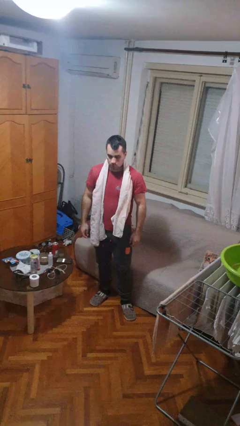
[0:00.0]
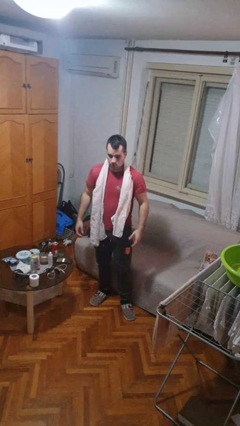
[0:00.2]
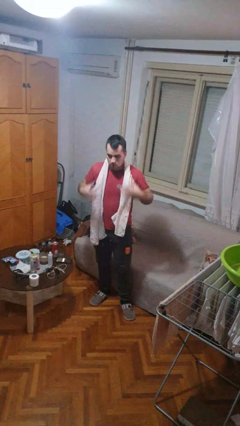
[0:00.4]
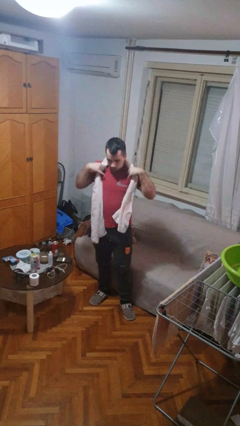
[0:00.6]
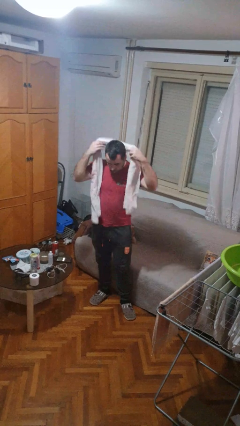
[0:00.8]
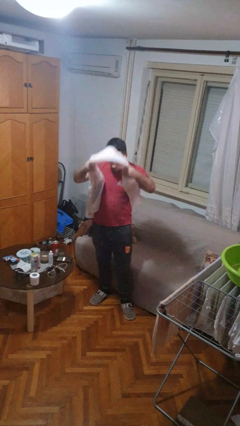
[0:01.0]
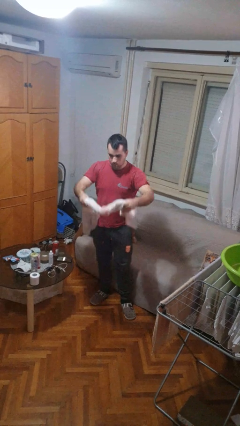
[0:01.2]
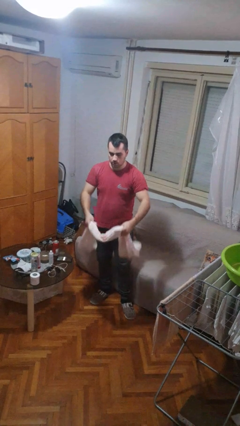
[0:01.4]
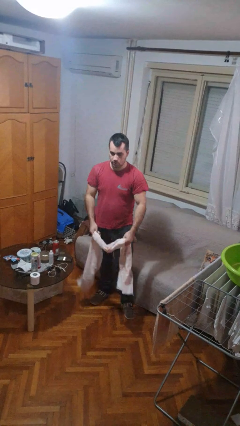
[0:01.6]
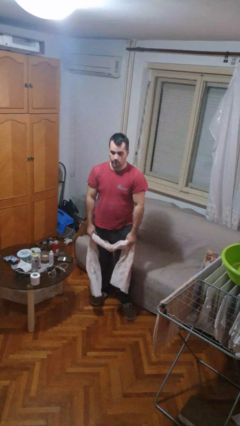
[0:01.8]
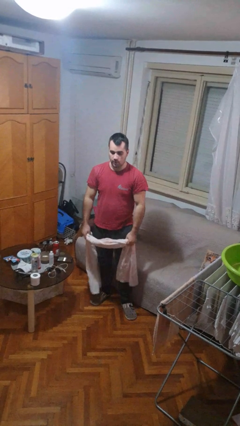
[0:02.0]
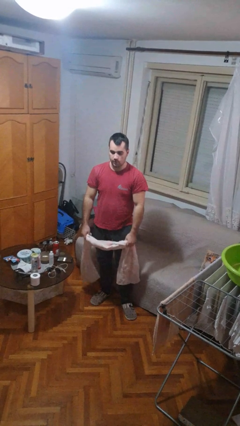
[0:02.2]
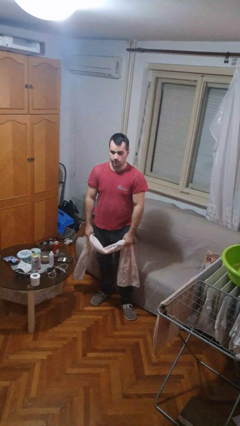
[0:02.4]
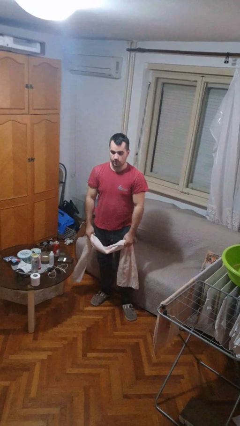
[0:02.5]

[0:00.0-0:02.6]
person takes off scarf

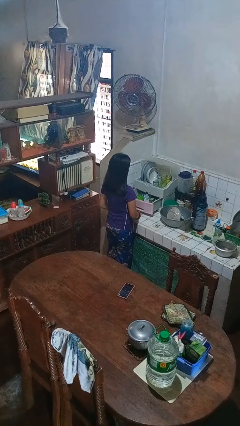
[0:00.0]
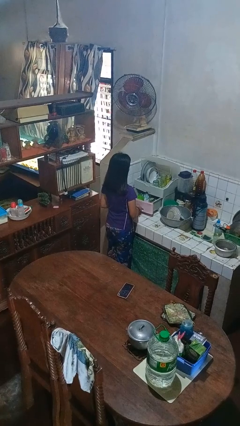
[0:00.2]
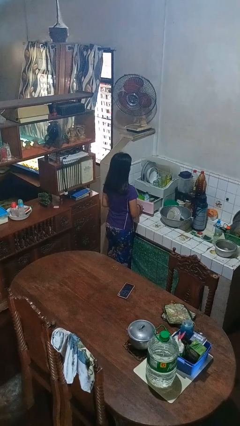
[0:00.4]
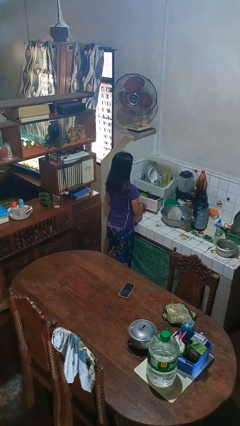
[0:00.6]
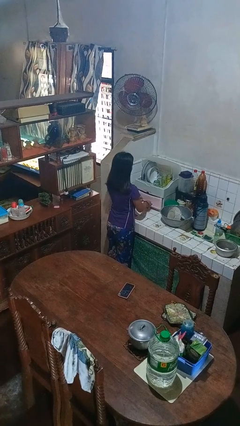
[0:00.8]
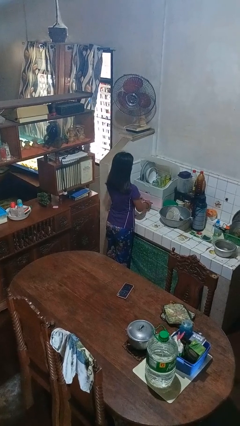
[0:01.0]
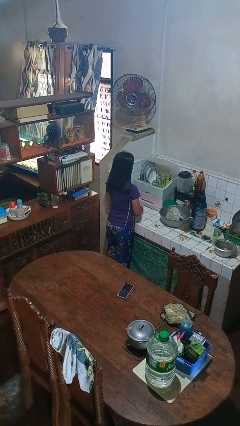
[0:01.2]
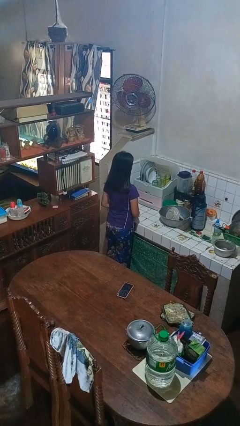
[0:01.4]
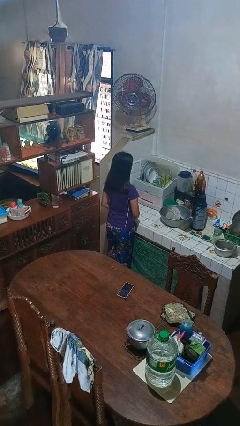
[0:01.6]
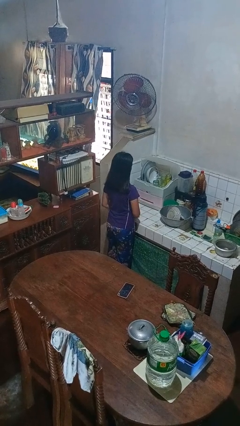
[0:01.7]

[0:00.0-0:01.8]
person closes kitchen drawer

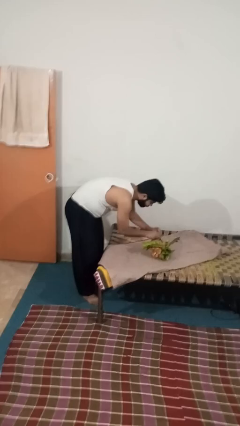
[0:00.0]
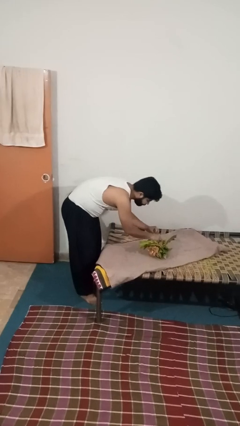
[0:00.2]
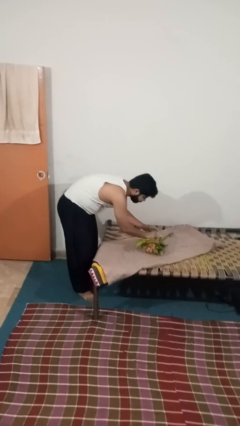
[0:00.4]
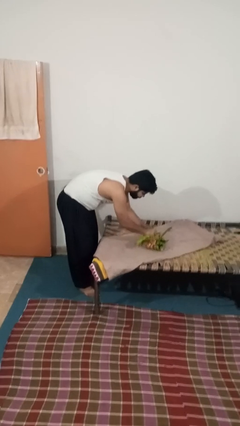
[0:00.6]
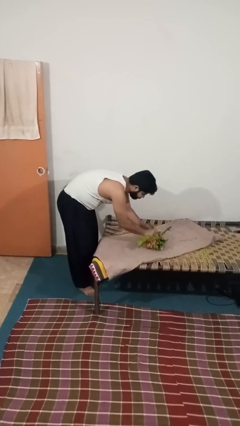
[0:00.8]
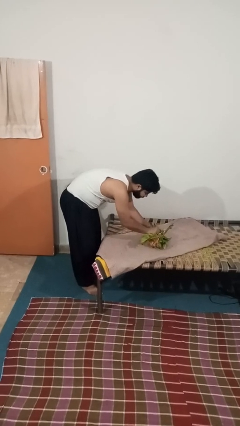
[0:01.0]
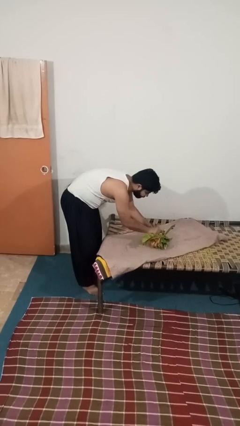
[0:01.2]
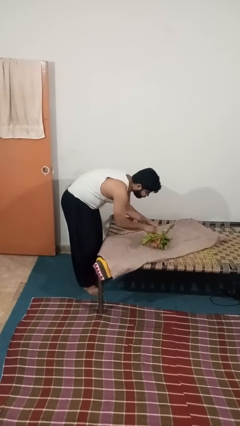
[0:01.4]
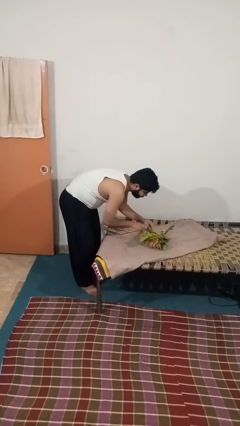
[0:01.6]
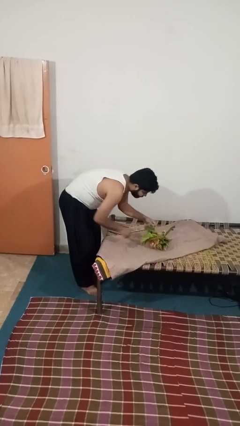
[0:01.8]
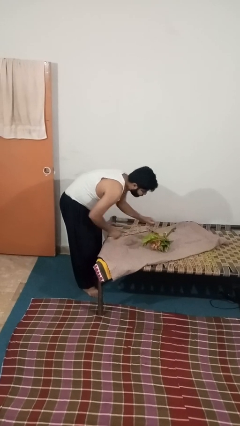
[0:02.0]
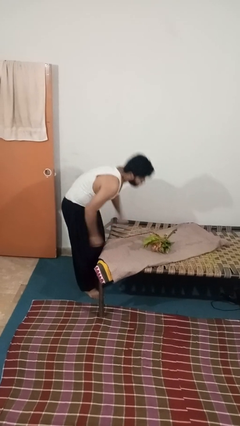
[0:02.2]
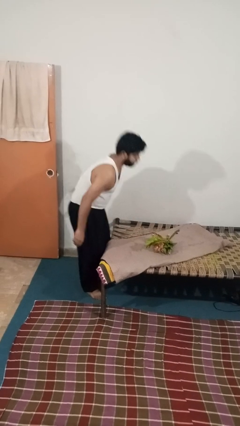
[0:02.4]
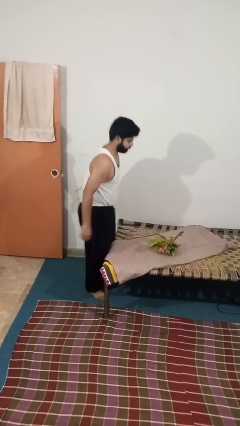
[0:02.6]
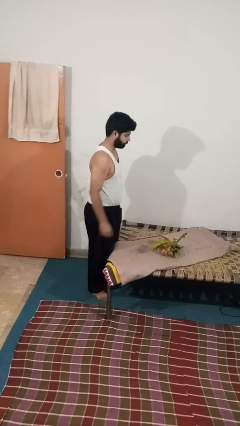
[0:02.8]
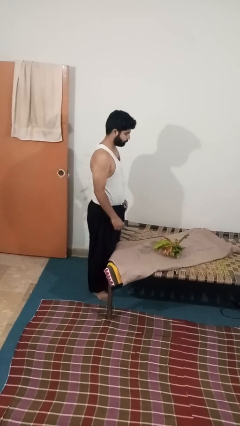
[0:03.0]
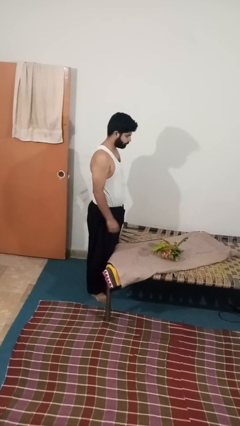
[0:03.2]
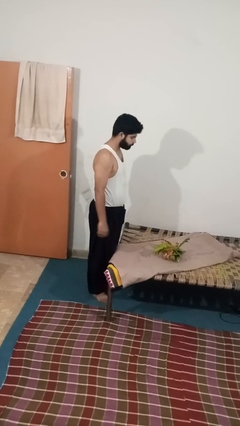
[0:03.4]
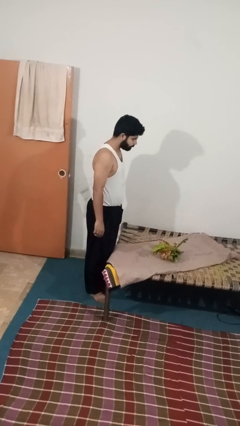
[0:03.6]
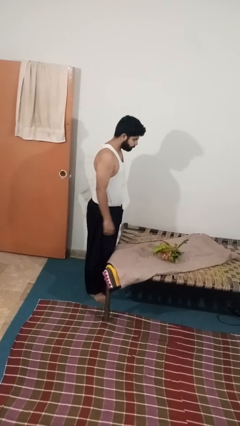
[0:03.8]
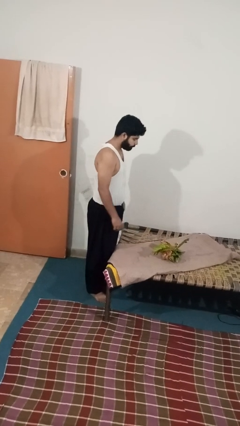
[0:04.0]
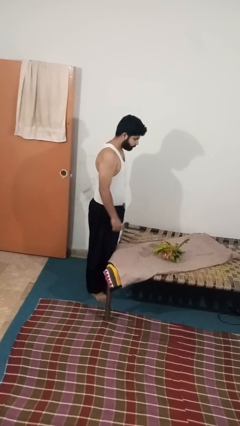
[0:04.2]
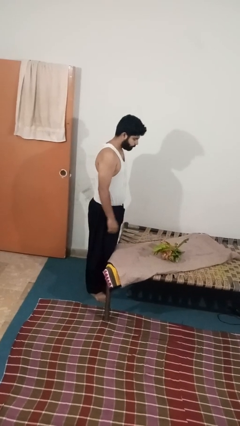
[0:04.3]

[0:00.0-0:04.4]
person arranges flowers in vase

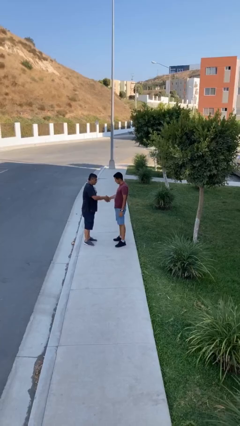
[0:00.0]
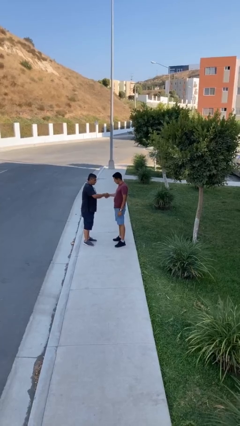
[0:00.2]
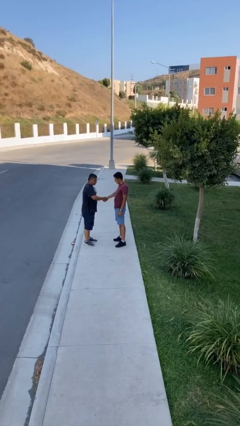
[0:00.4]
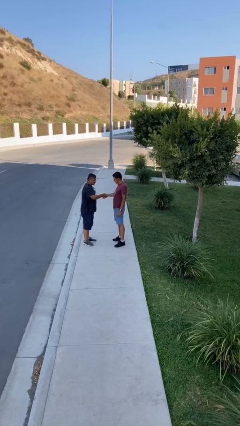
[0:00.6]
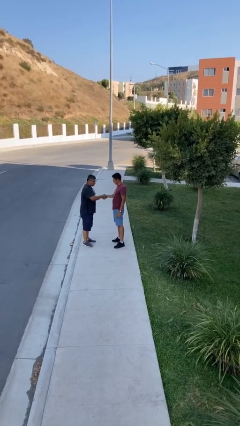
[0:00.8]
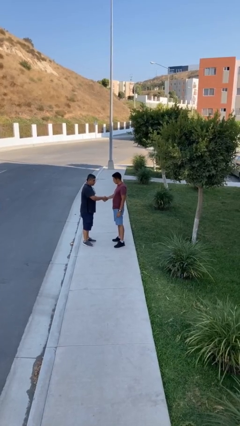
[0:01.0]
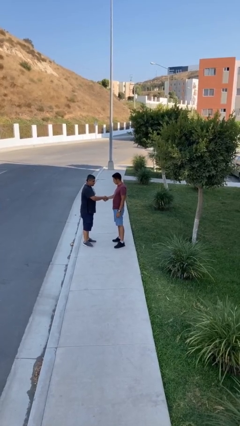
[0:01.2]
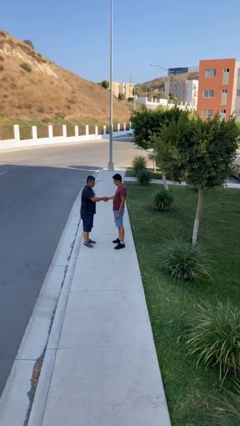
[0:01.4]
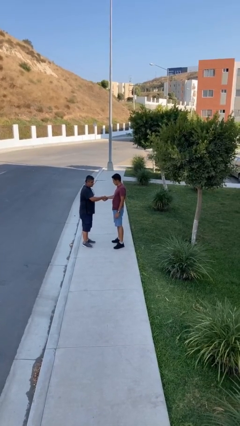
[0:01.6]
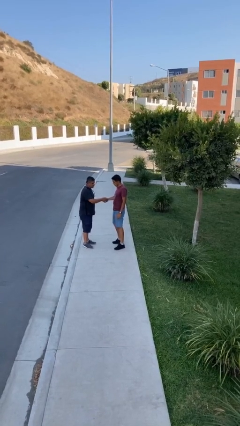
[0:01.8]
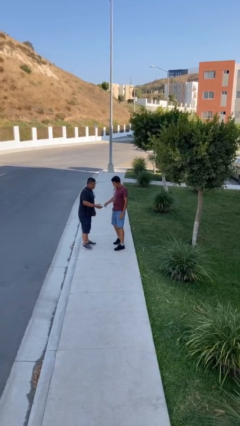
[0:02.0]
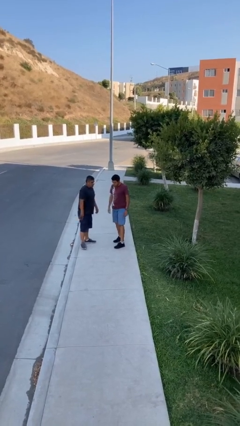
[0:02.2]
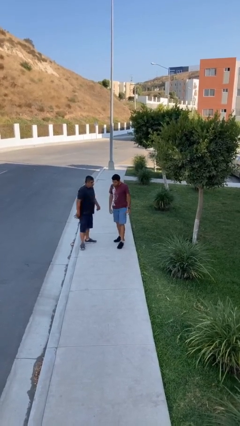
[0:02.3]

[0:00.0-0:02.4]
person shakes hand

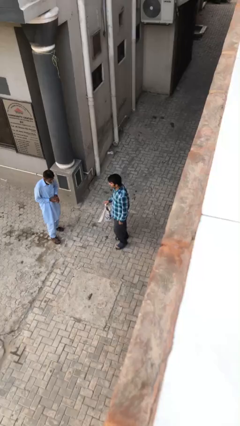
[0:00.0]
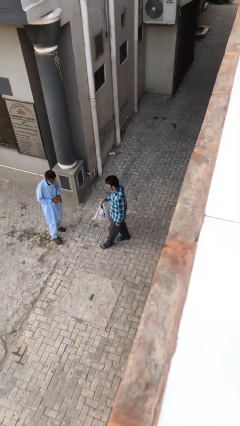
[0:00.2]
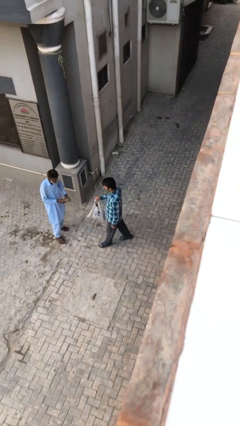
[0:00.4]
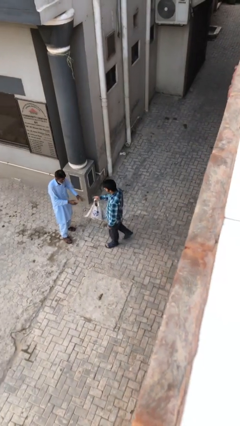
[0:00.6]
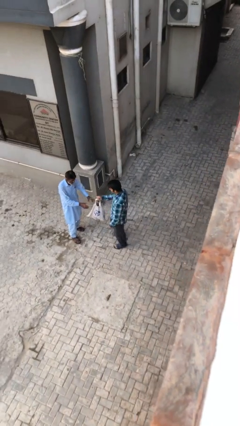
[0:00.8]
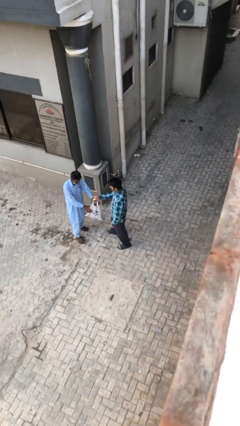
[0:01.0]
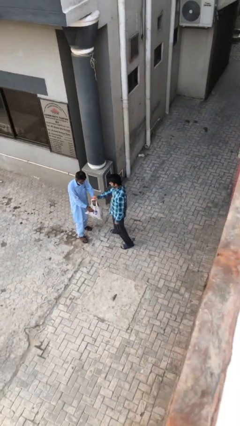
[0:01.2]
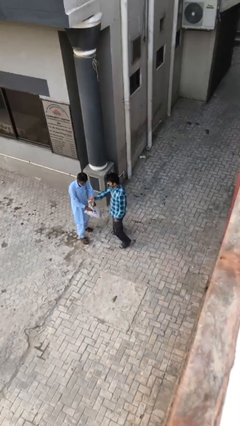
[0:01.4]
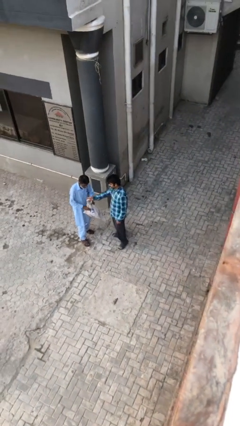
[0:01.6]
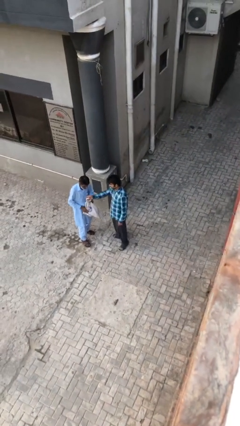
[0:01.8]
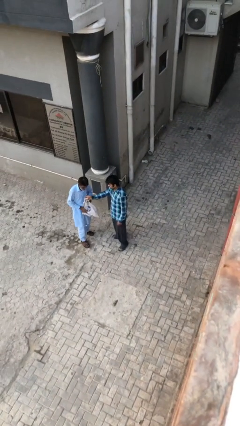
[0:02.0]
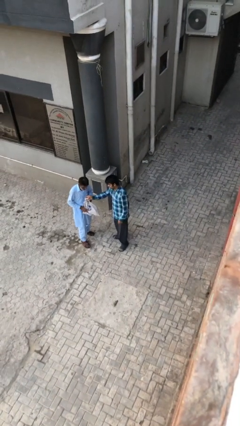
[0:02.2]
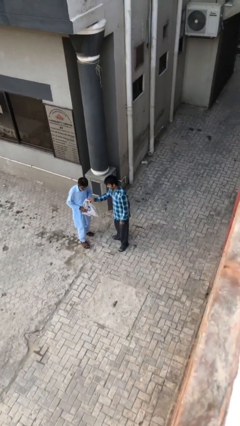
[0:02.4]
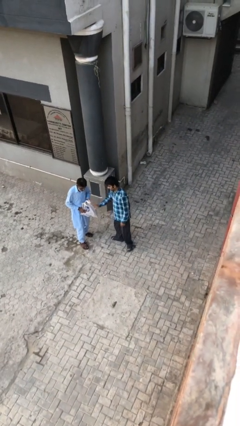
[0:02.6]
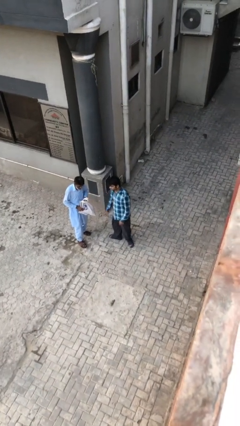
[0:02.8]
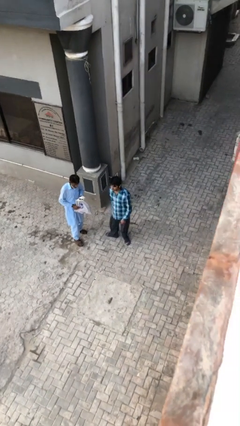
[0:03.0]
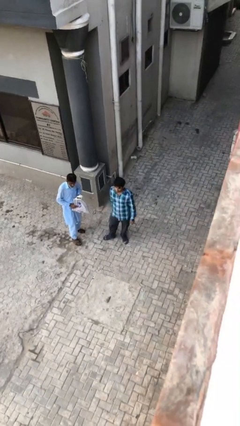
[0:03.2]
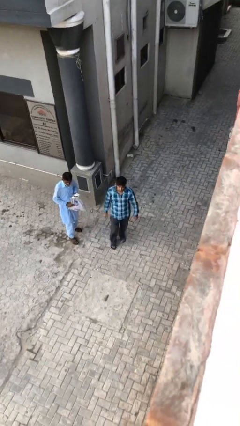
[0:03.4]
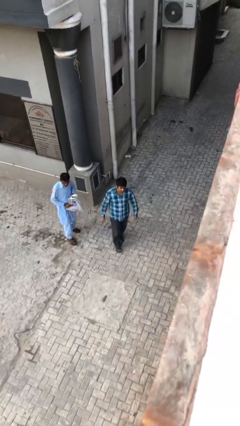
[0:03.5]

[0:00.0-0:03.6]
person transfers object to person

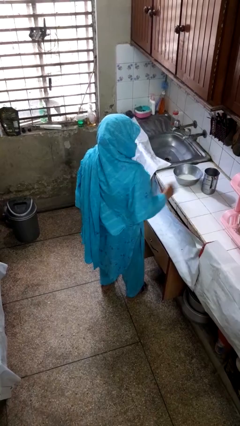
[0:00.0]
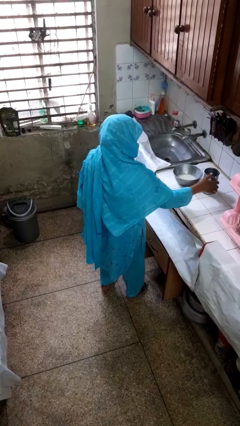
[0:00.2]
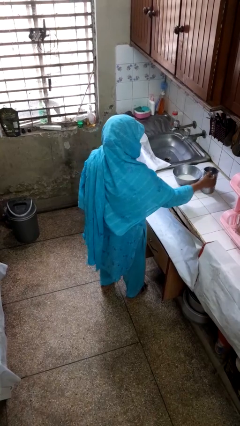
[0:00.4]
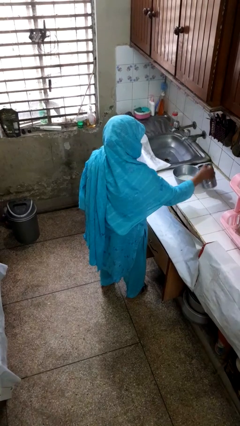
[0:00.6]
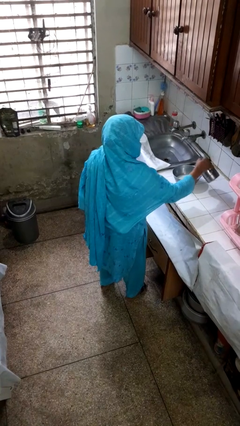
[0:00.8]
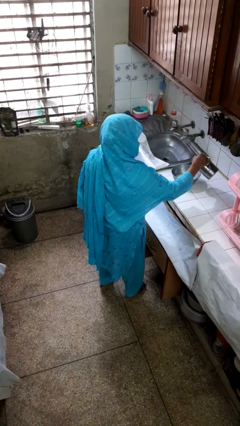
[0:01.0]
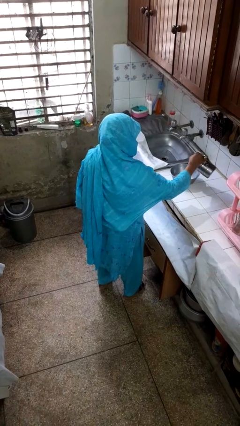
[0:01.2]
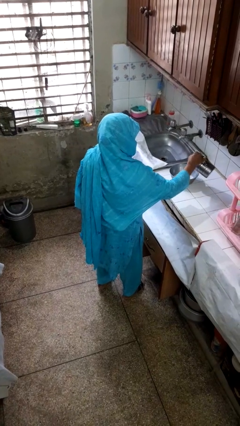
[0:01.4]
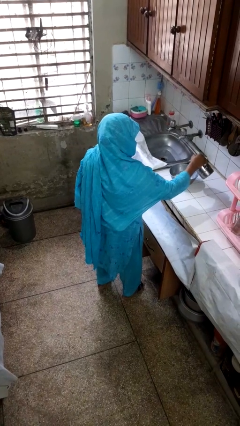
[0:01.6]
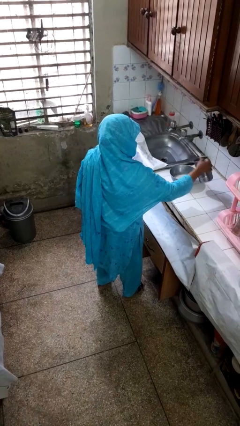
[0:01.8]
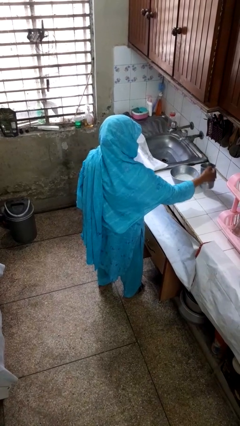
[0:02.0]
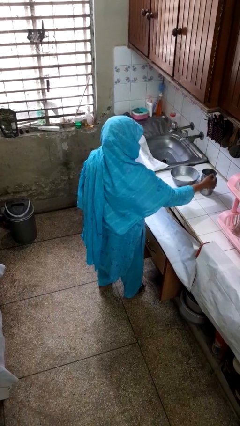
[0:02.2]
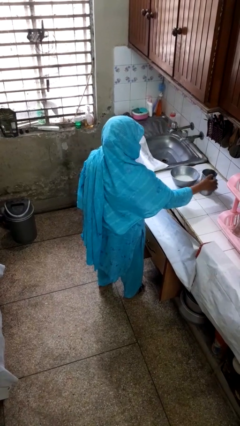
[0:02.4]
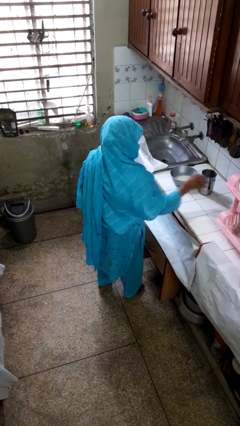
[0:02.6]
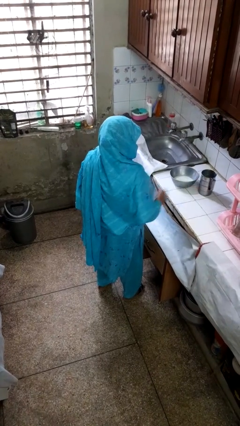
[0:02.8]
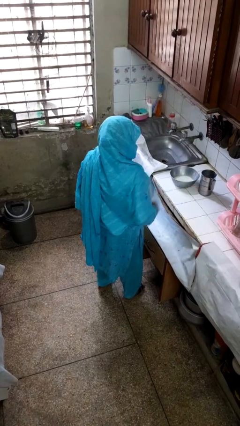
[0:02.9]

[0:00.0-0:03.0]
person pours into bowl
